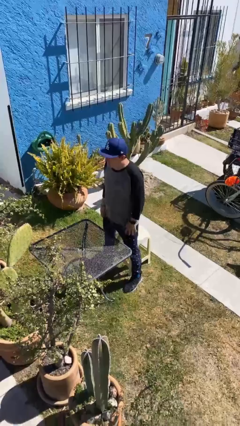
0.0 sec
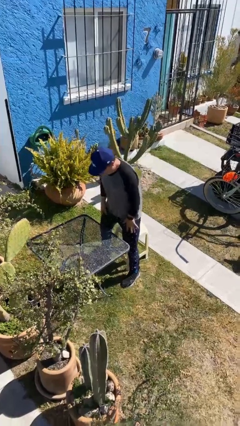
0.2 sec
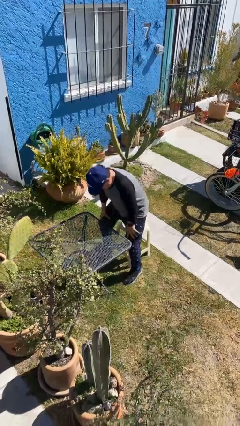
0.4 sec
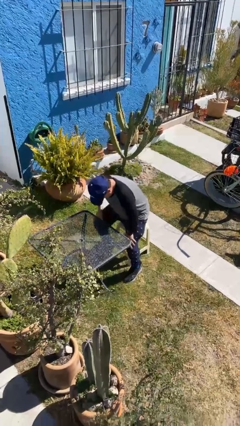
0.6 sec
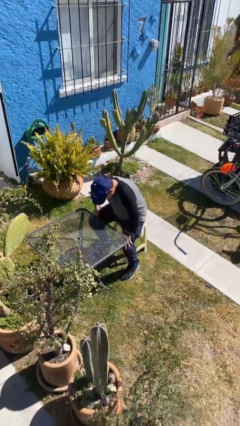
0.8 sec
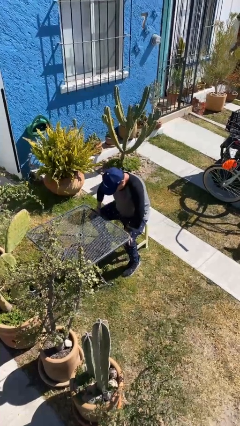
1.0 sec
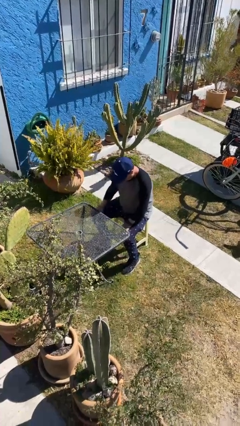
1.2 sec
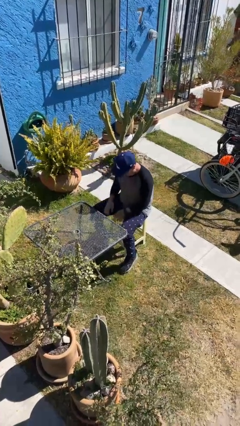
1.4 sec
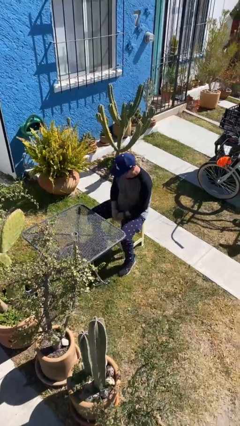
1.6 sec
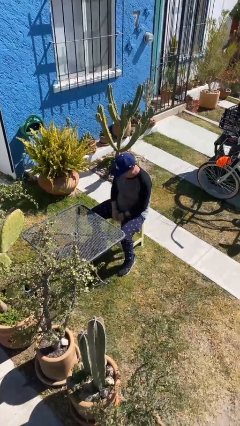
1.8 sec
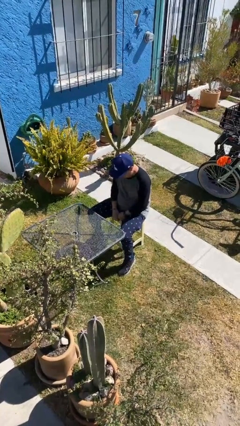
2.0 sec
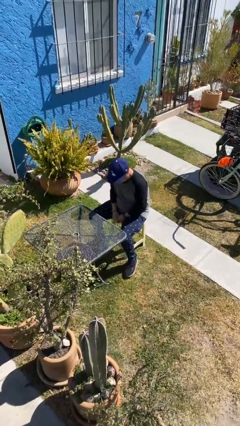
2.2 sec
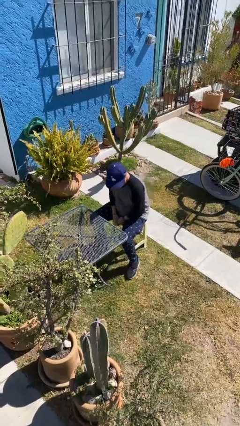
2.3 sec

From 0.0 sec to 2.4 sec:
person sits down

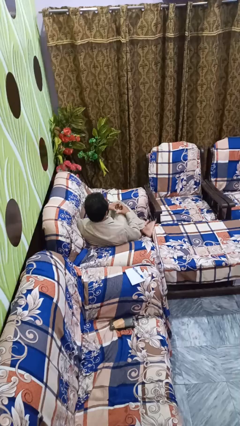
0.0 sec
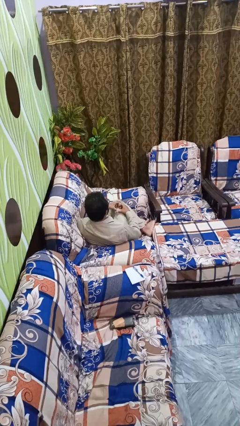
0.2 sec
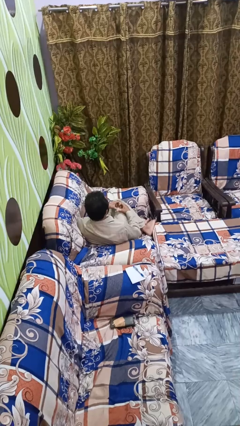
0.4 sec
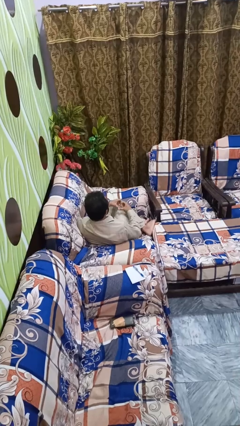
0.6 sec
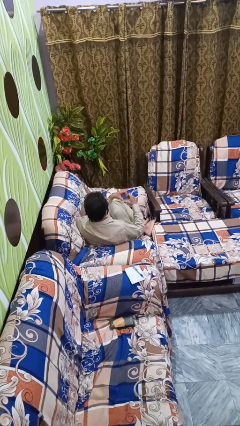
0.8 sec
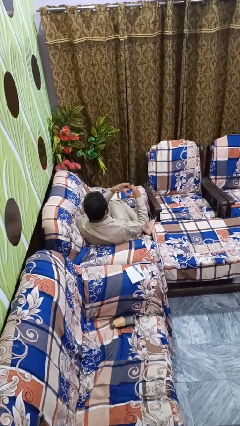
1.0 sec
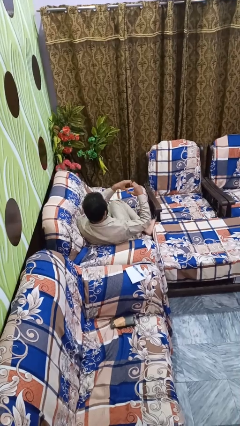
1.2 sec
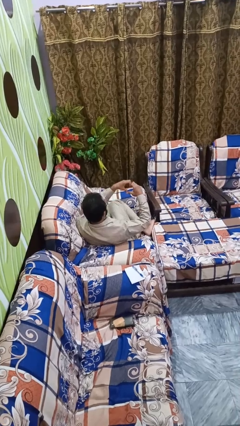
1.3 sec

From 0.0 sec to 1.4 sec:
person gestures heart

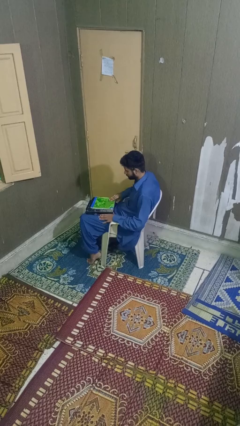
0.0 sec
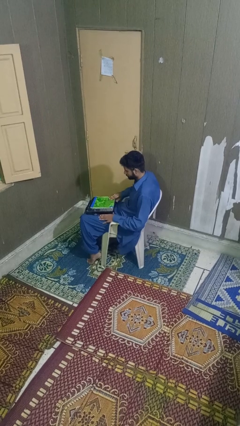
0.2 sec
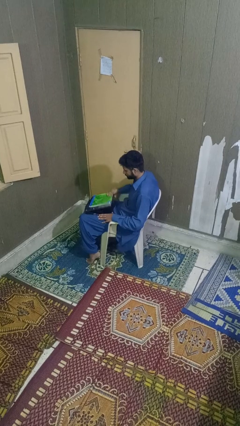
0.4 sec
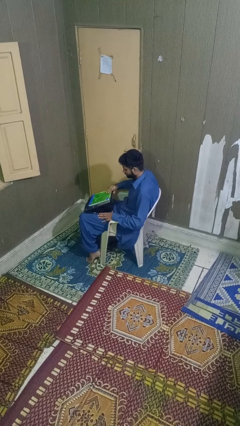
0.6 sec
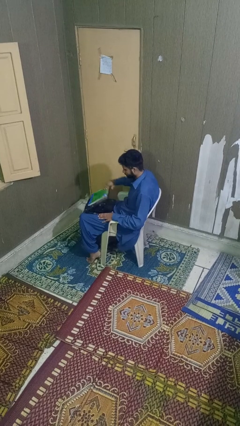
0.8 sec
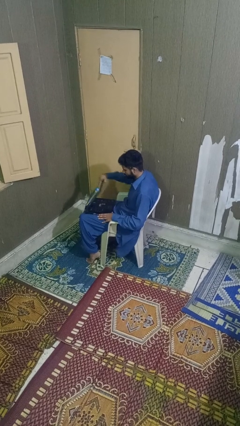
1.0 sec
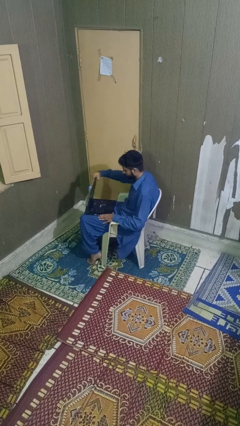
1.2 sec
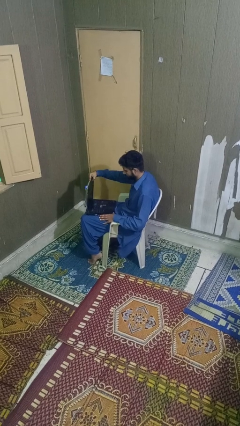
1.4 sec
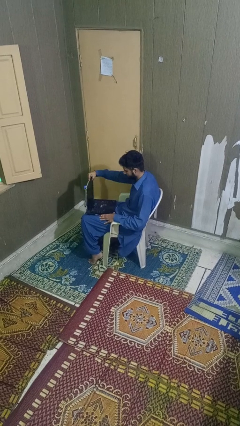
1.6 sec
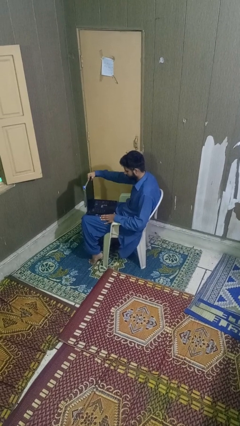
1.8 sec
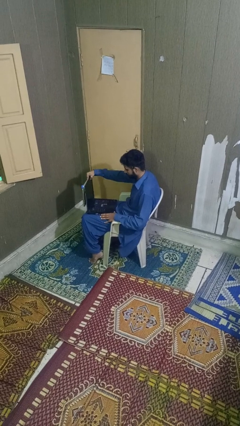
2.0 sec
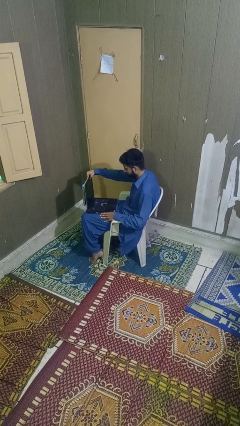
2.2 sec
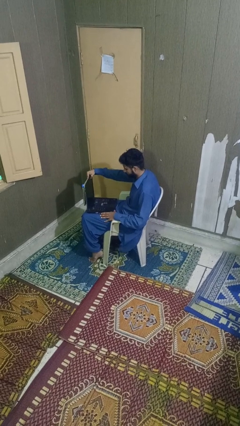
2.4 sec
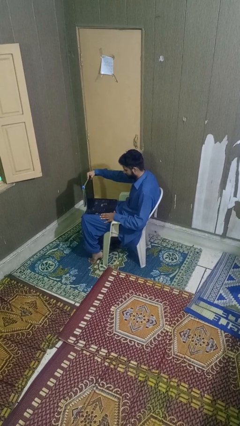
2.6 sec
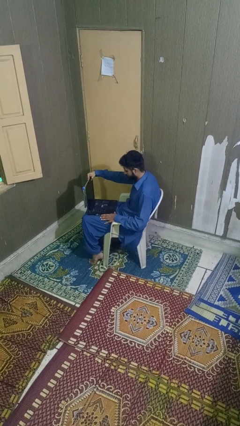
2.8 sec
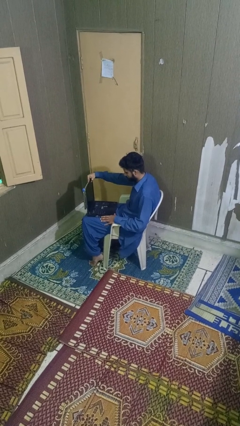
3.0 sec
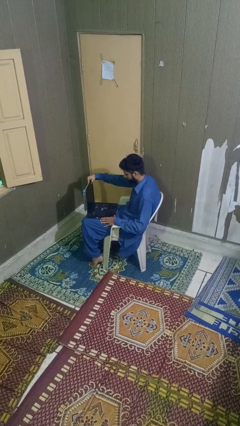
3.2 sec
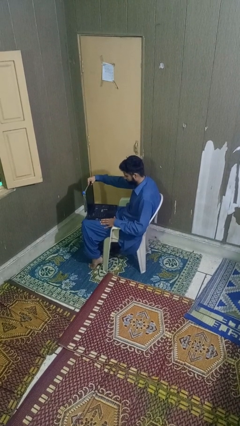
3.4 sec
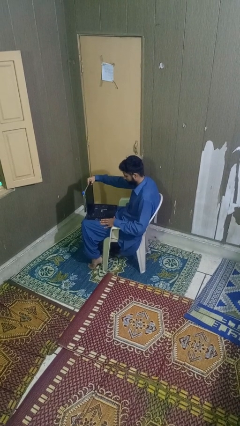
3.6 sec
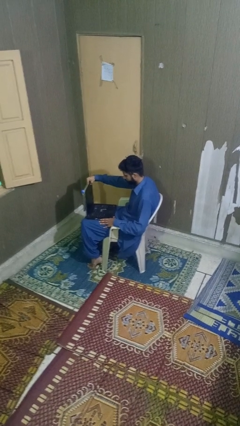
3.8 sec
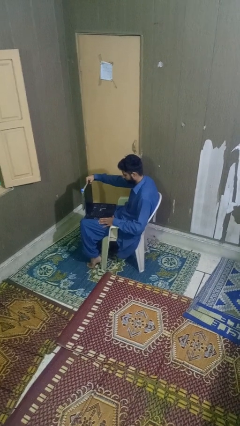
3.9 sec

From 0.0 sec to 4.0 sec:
person opens laptop

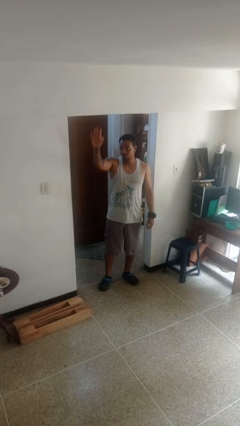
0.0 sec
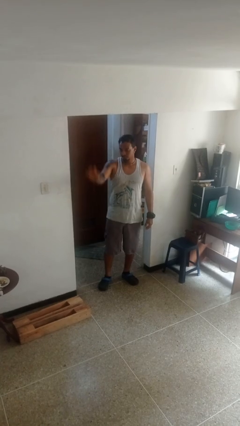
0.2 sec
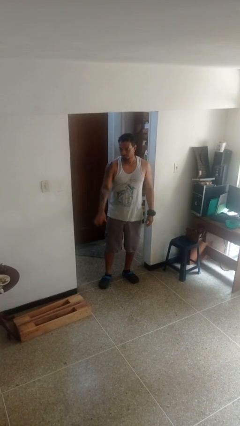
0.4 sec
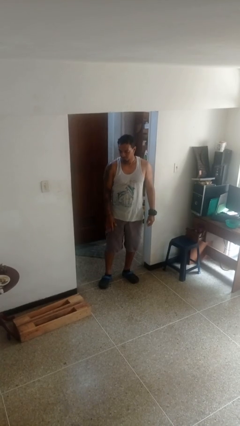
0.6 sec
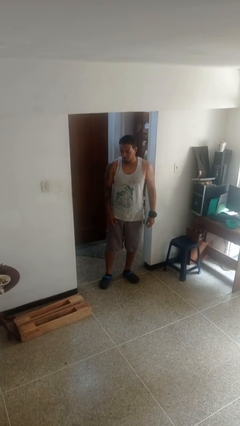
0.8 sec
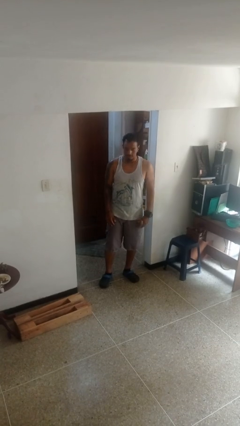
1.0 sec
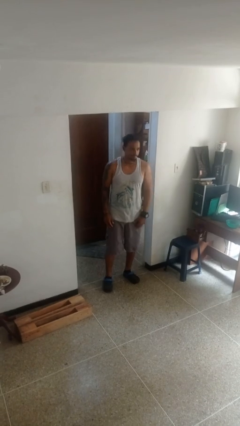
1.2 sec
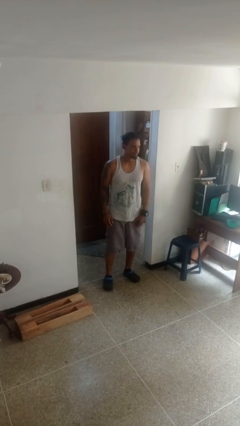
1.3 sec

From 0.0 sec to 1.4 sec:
person gestures swipe down

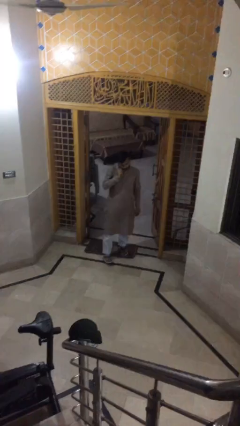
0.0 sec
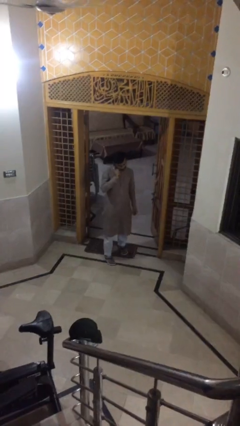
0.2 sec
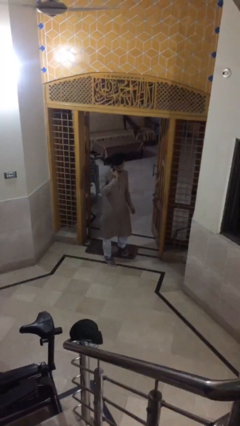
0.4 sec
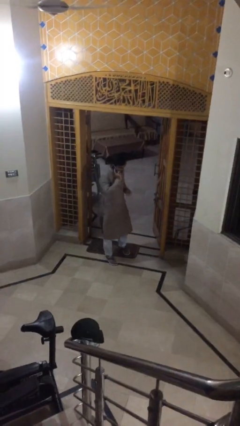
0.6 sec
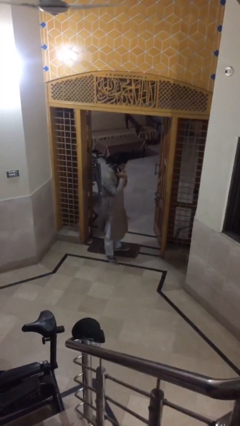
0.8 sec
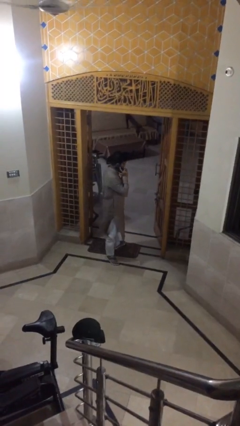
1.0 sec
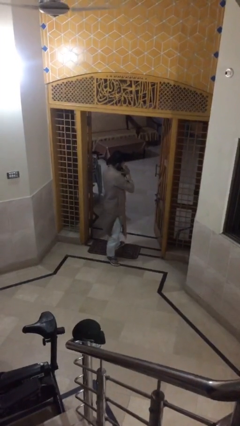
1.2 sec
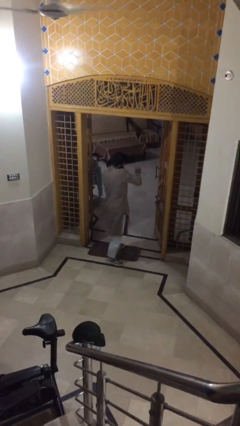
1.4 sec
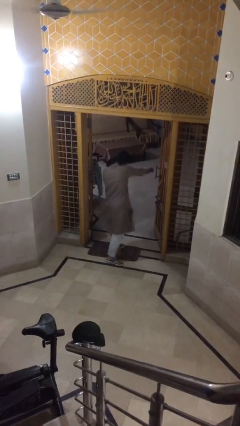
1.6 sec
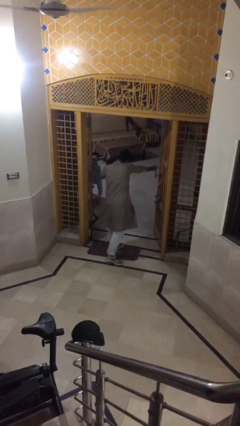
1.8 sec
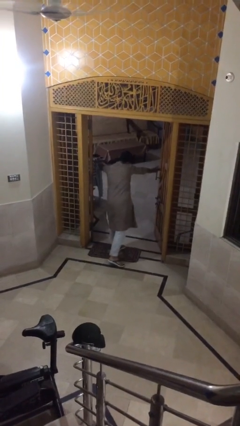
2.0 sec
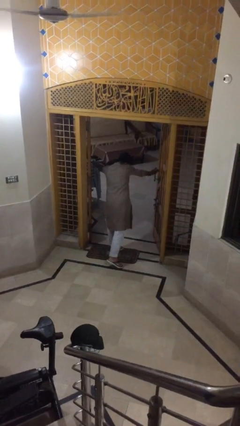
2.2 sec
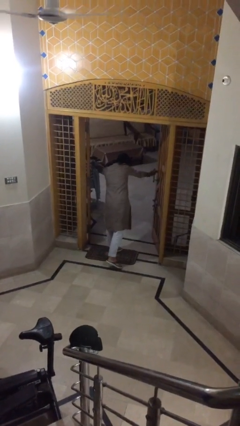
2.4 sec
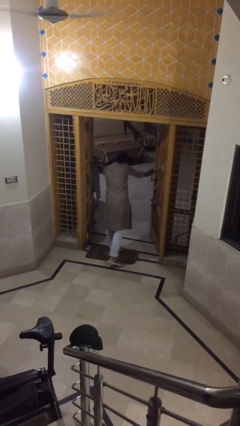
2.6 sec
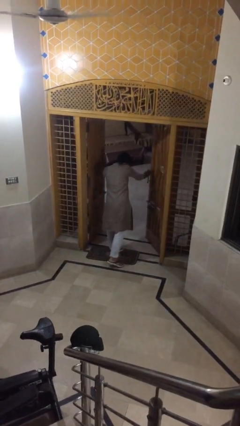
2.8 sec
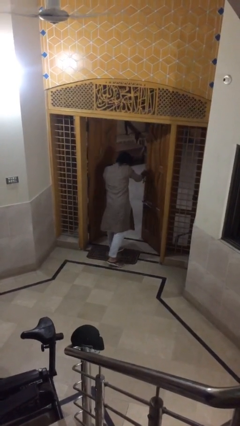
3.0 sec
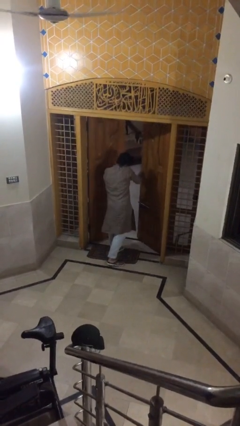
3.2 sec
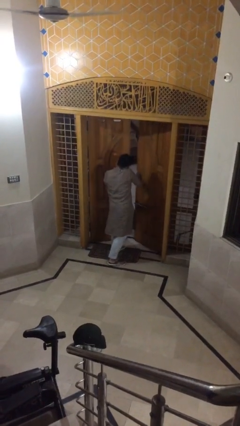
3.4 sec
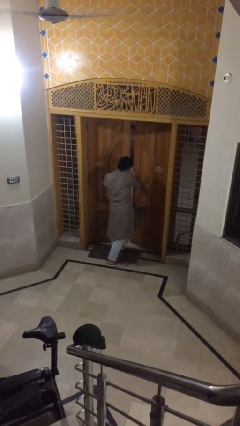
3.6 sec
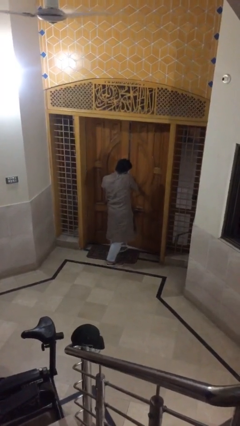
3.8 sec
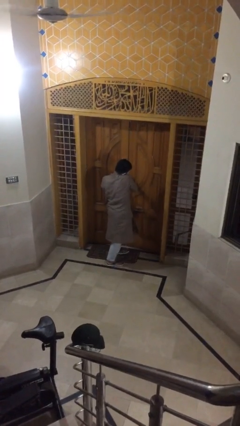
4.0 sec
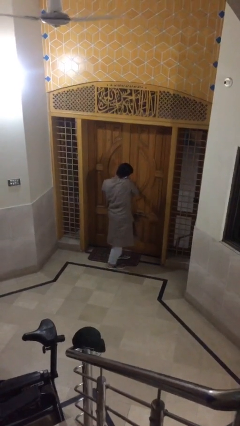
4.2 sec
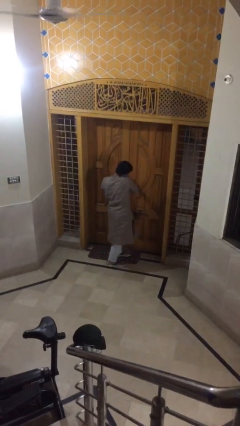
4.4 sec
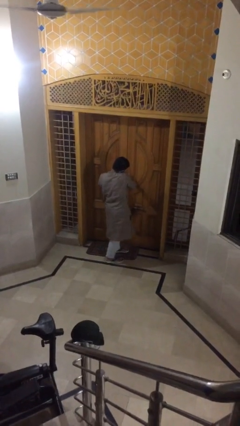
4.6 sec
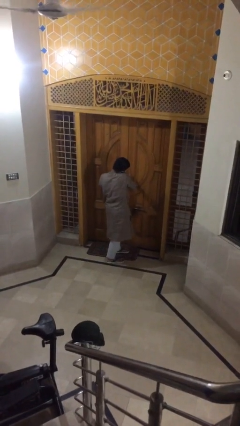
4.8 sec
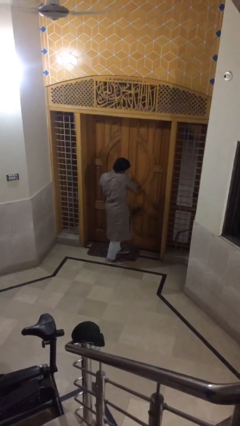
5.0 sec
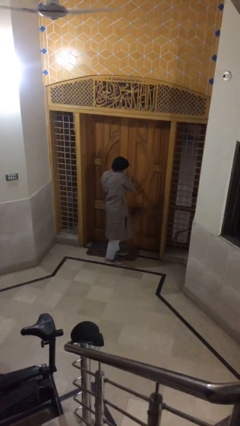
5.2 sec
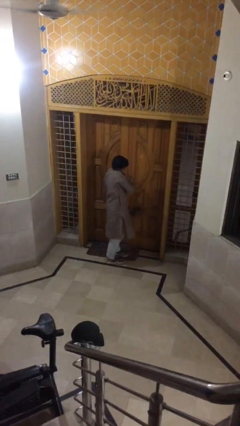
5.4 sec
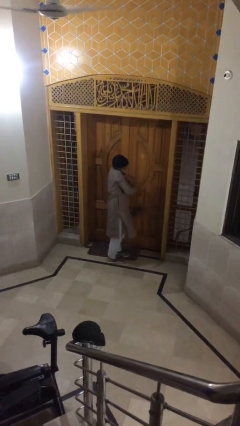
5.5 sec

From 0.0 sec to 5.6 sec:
person closes facility door

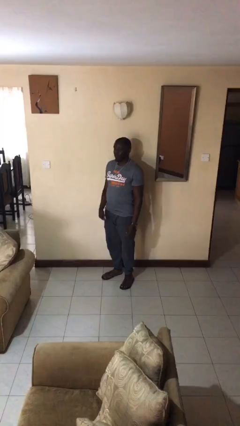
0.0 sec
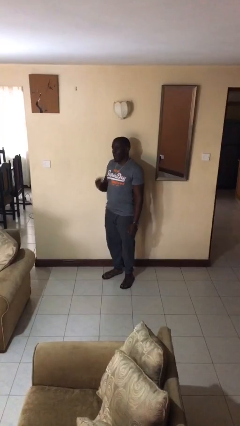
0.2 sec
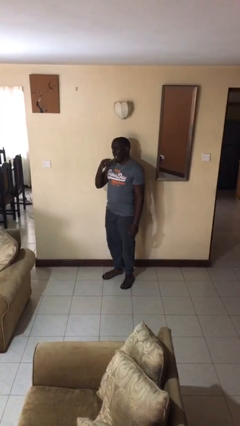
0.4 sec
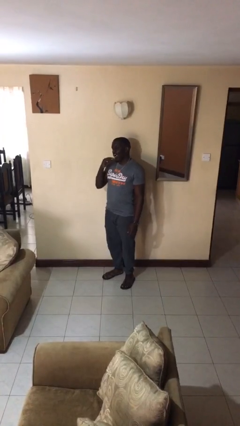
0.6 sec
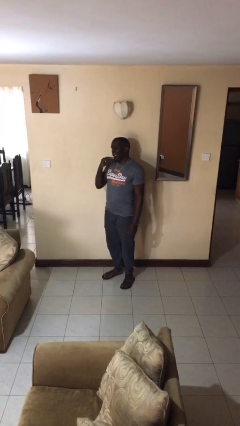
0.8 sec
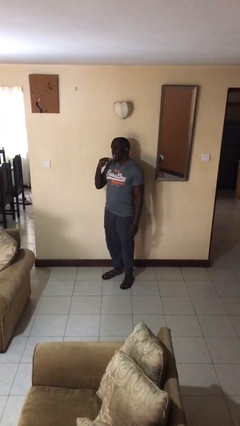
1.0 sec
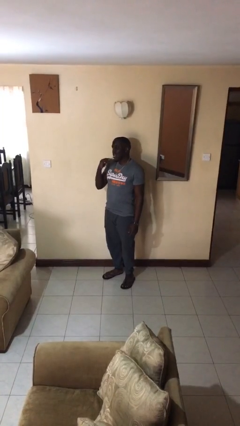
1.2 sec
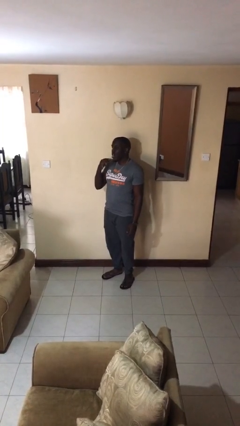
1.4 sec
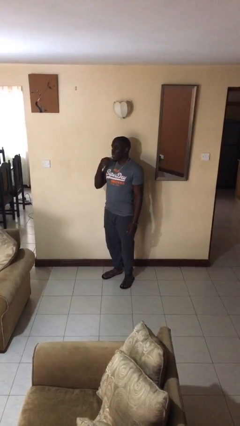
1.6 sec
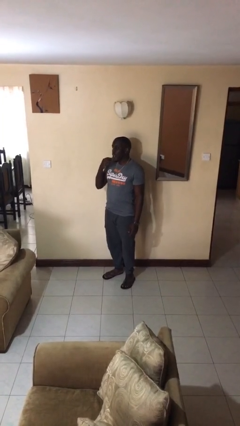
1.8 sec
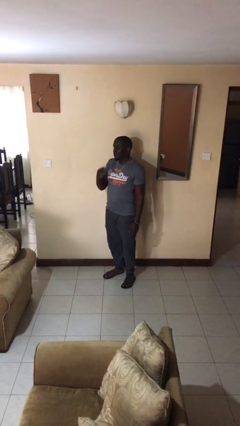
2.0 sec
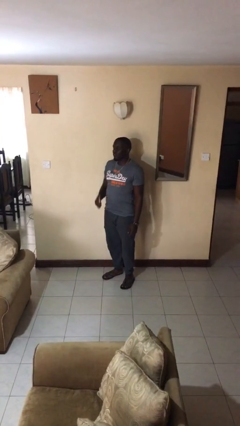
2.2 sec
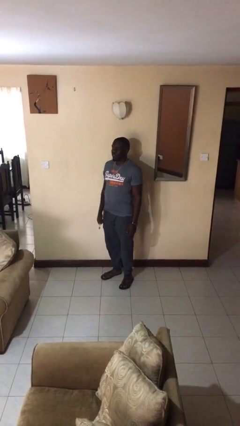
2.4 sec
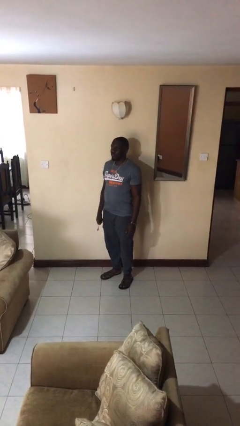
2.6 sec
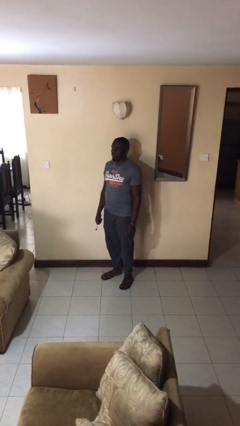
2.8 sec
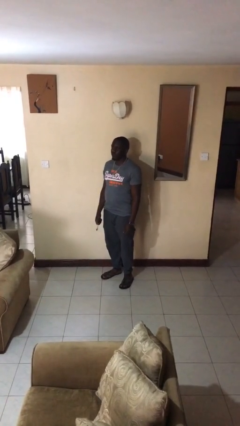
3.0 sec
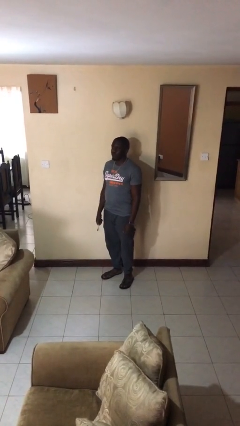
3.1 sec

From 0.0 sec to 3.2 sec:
person brushes teeth
